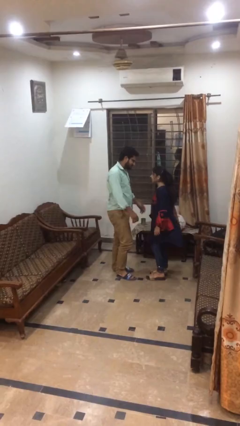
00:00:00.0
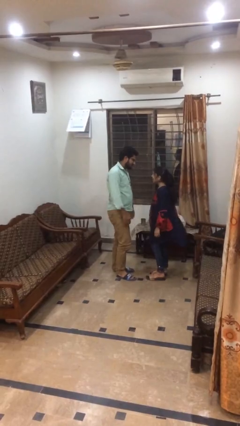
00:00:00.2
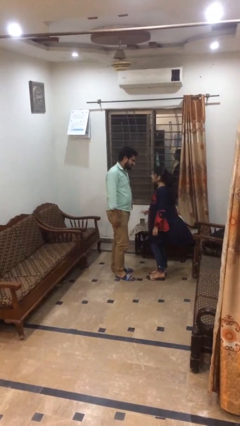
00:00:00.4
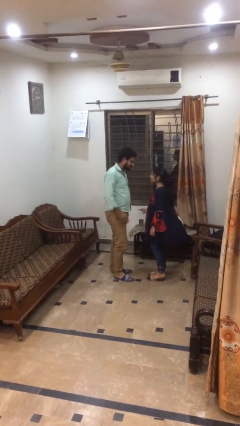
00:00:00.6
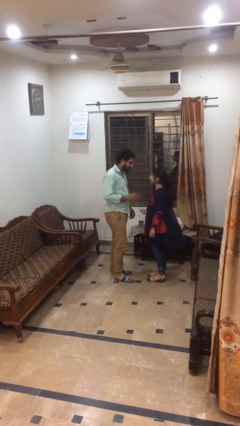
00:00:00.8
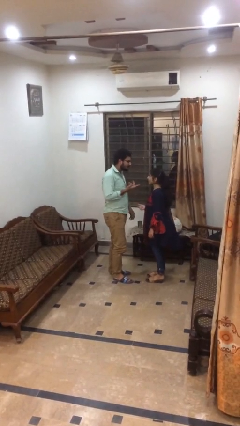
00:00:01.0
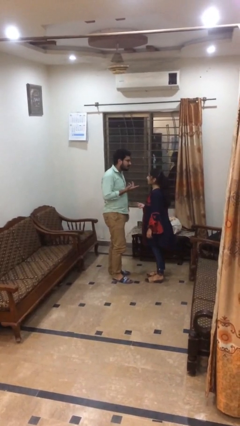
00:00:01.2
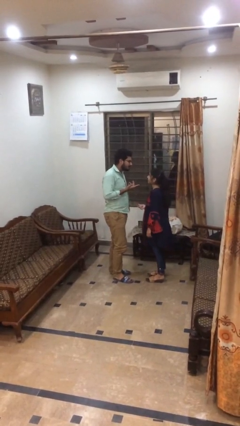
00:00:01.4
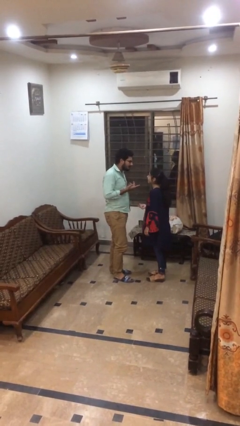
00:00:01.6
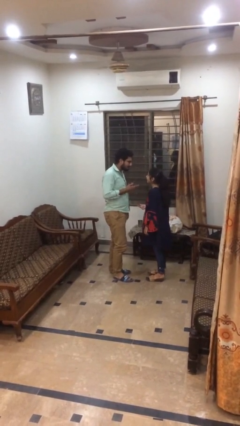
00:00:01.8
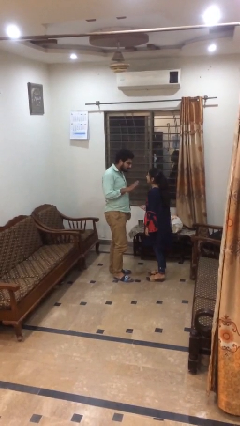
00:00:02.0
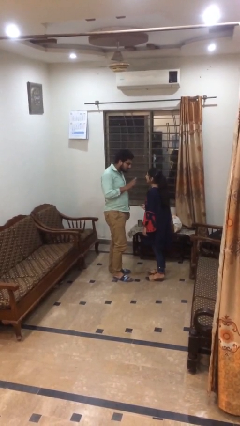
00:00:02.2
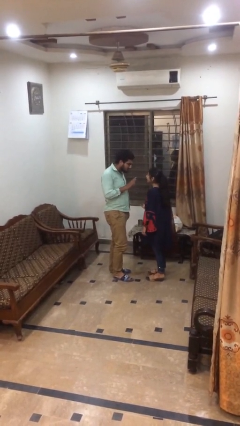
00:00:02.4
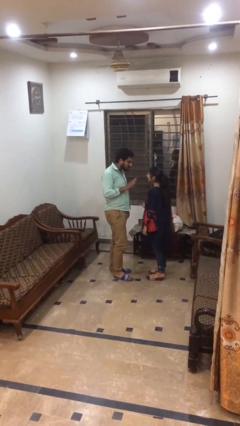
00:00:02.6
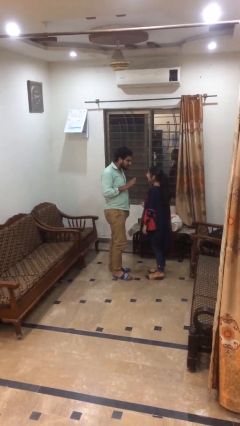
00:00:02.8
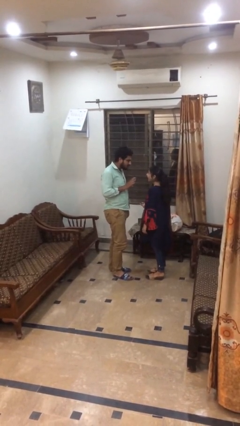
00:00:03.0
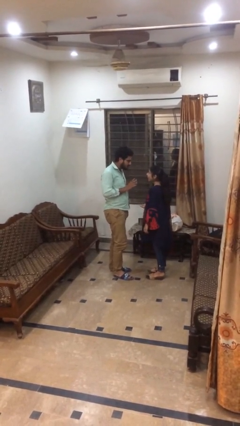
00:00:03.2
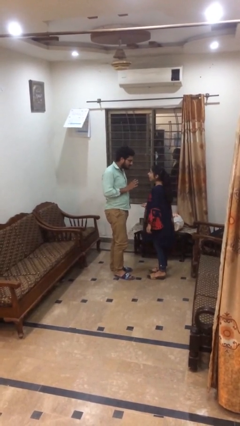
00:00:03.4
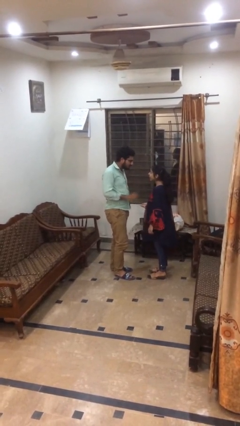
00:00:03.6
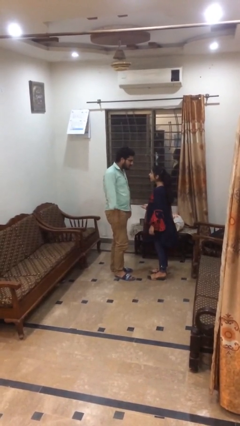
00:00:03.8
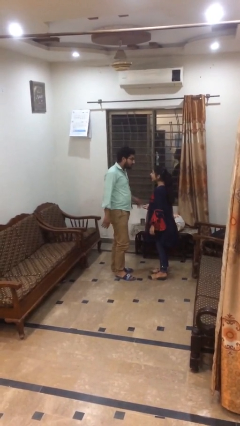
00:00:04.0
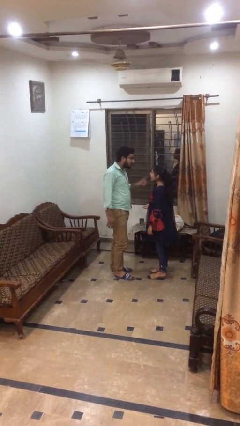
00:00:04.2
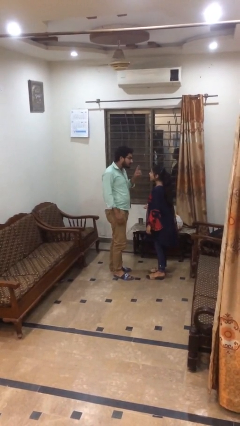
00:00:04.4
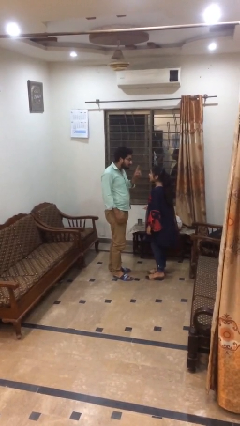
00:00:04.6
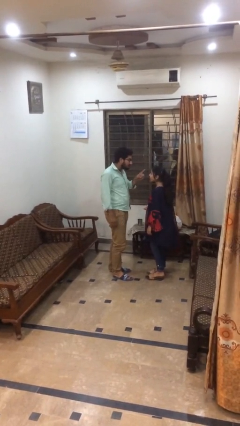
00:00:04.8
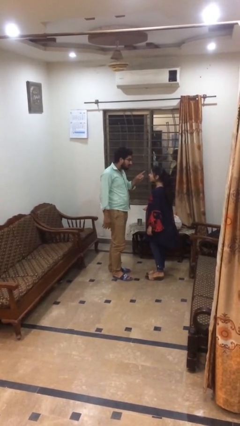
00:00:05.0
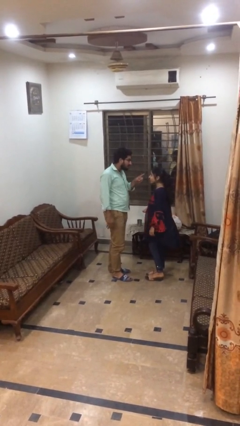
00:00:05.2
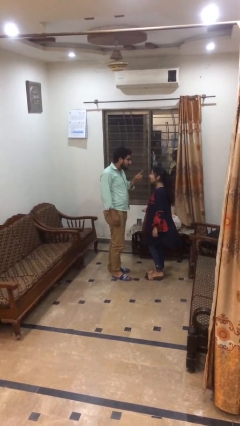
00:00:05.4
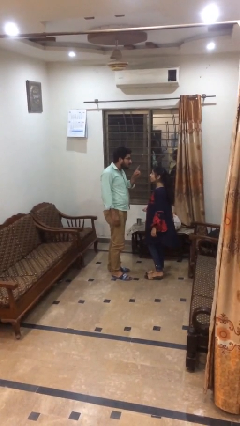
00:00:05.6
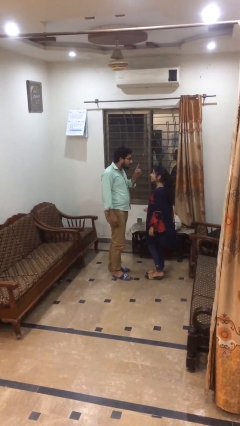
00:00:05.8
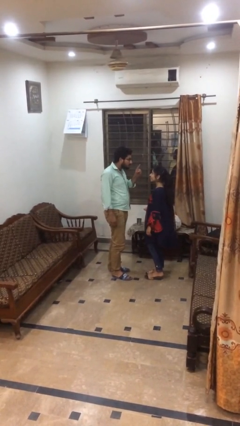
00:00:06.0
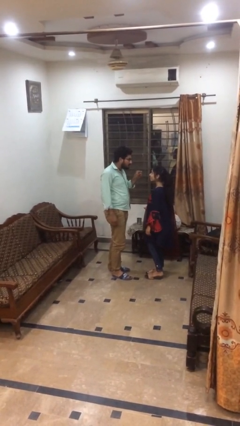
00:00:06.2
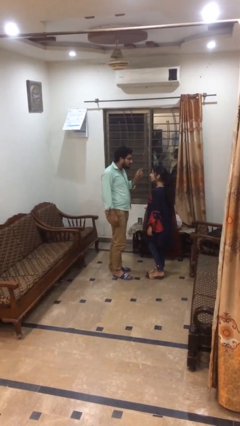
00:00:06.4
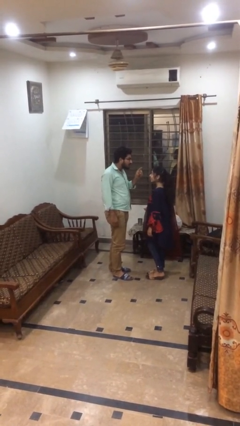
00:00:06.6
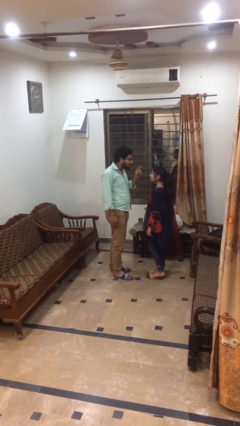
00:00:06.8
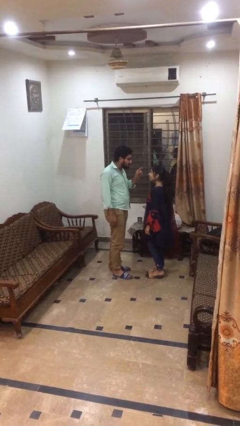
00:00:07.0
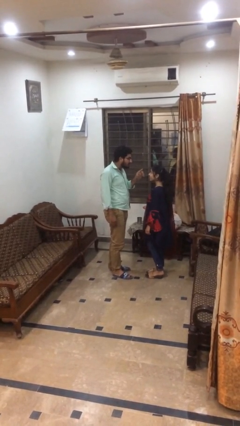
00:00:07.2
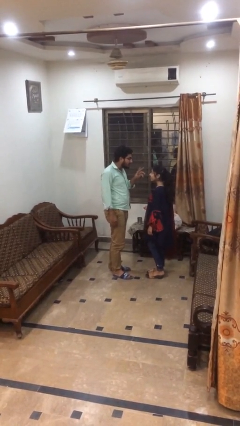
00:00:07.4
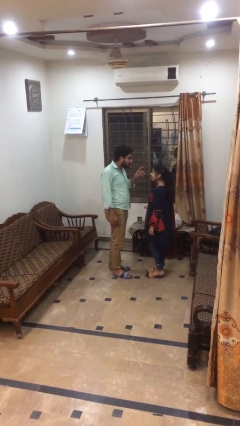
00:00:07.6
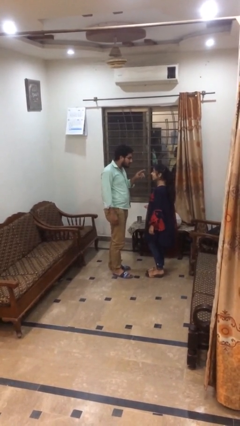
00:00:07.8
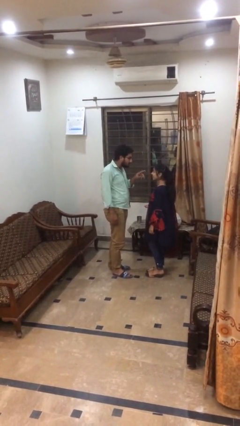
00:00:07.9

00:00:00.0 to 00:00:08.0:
person talks to person

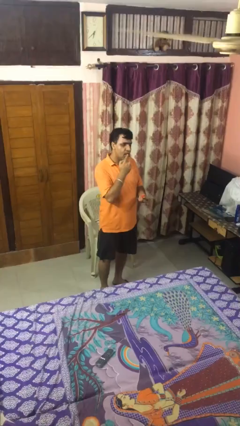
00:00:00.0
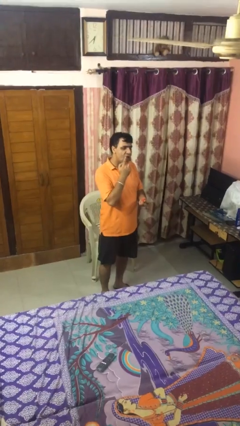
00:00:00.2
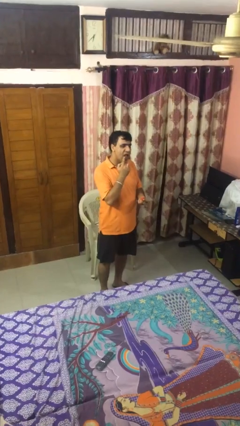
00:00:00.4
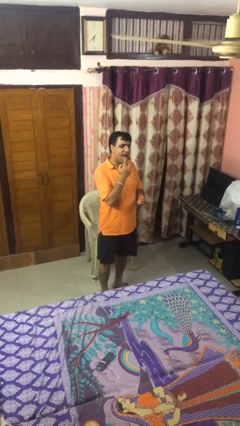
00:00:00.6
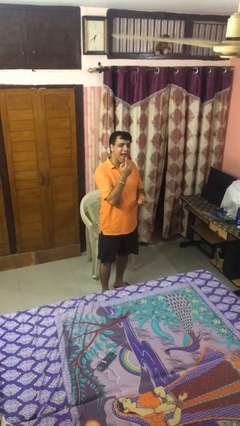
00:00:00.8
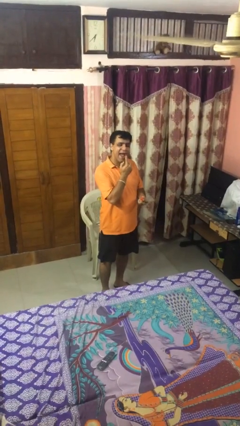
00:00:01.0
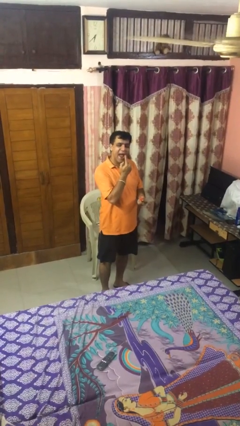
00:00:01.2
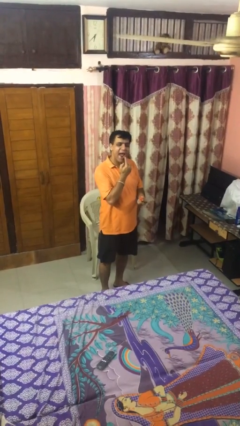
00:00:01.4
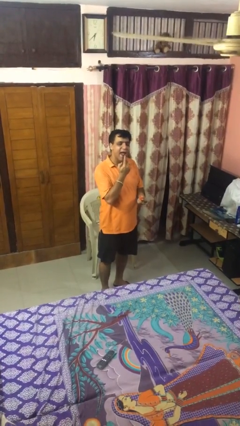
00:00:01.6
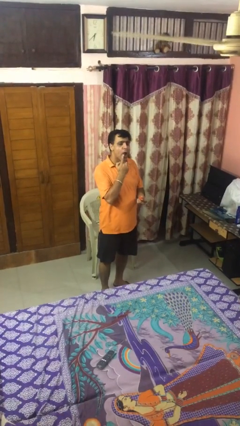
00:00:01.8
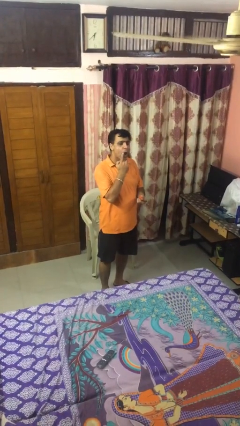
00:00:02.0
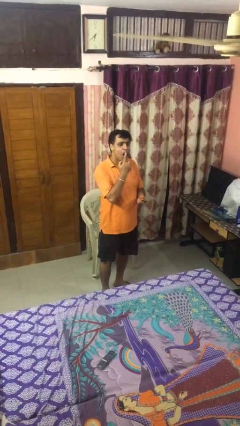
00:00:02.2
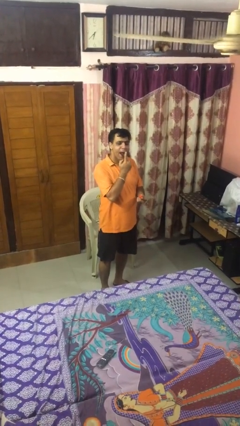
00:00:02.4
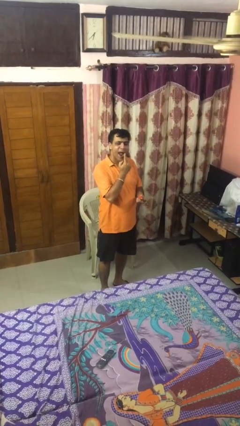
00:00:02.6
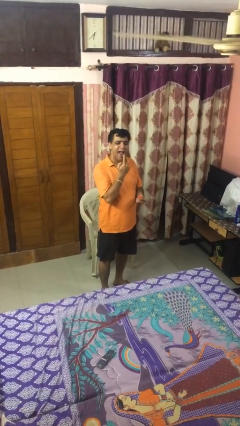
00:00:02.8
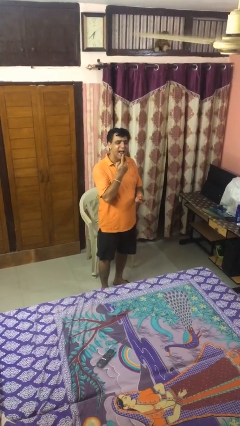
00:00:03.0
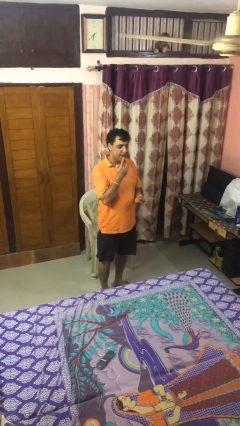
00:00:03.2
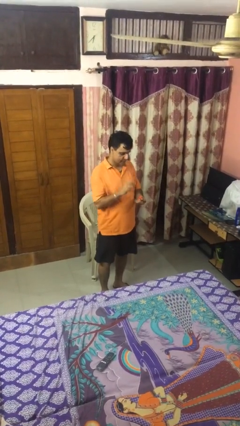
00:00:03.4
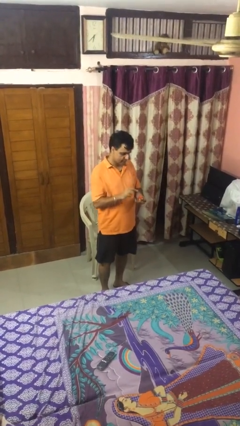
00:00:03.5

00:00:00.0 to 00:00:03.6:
person applies lip makeup

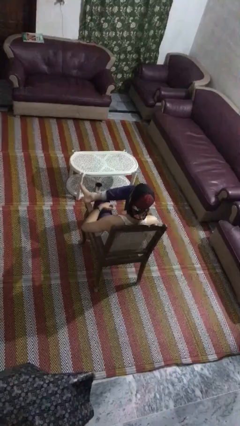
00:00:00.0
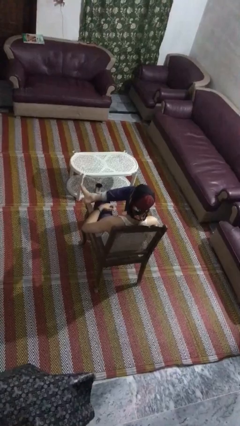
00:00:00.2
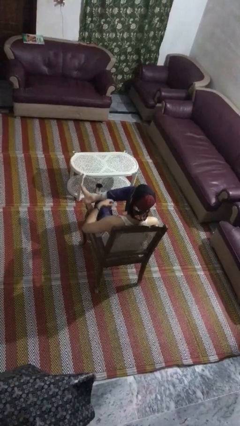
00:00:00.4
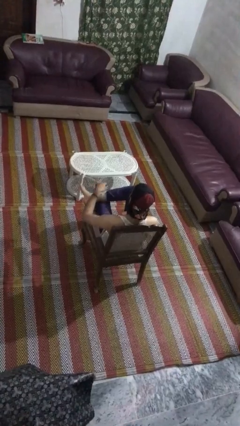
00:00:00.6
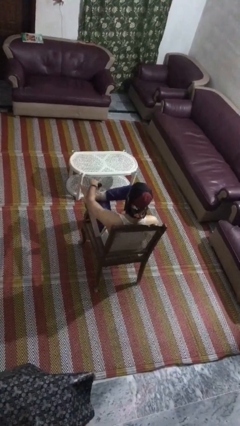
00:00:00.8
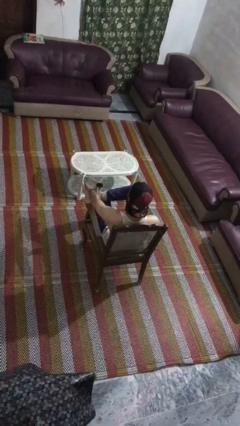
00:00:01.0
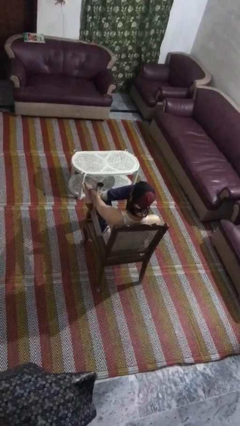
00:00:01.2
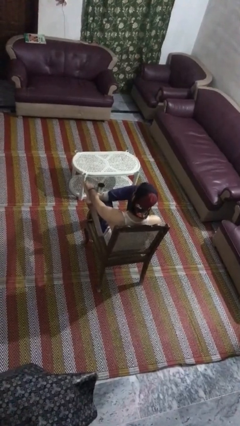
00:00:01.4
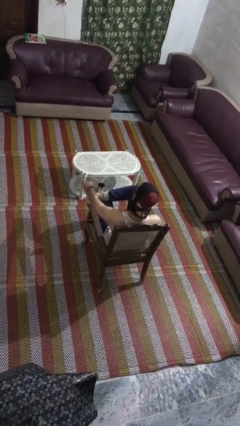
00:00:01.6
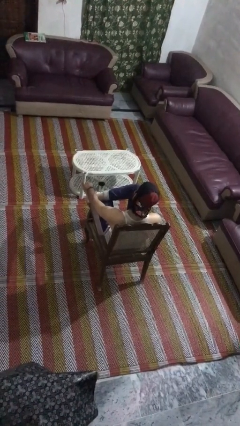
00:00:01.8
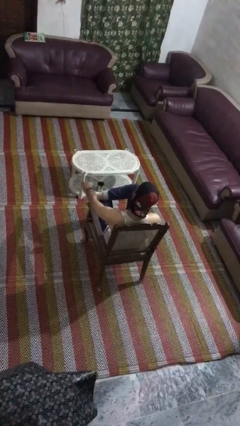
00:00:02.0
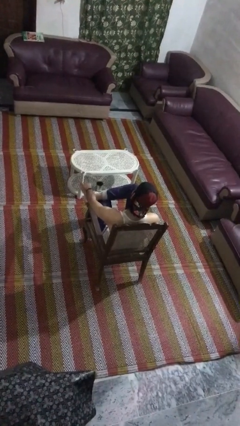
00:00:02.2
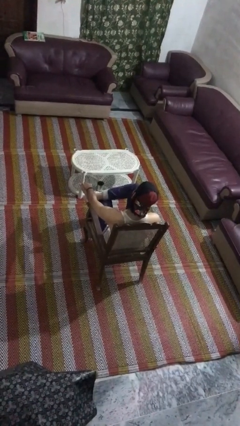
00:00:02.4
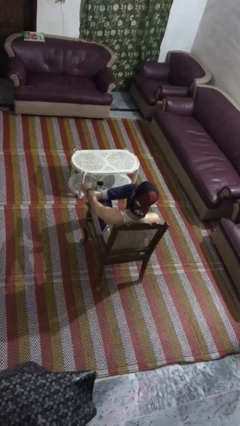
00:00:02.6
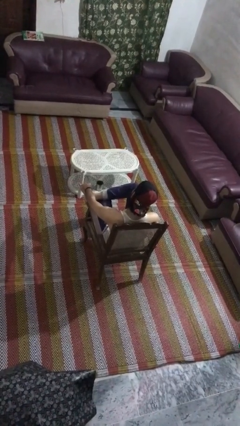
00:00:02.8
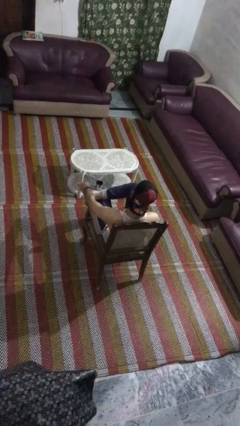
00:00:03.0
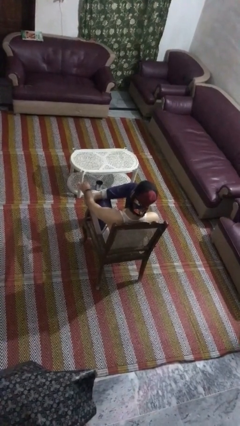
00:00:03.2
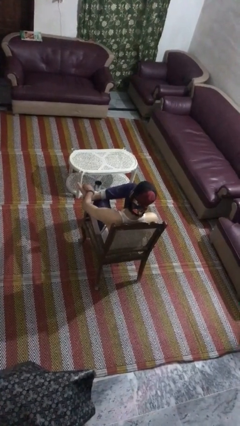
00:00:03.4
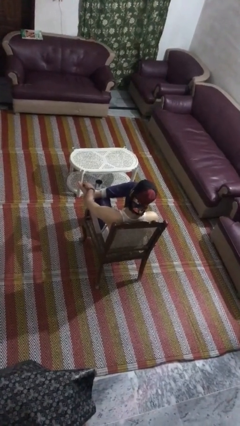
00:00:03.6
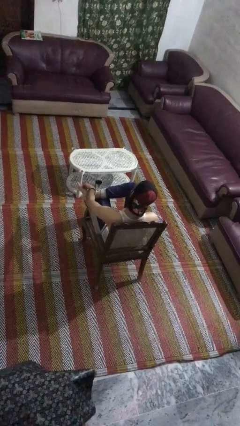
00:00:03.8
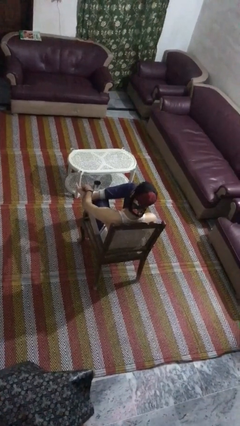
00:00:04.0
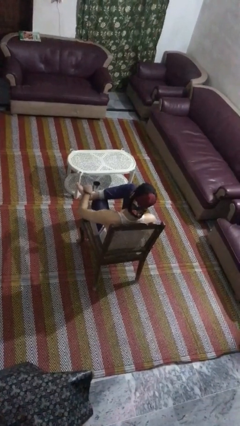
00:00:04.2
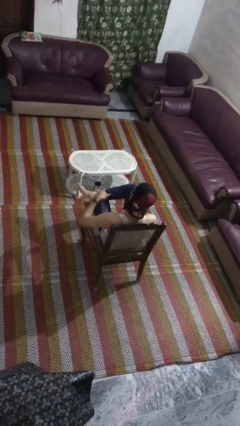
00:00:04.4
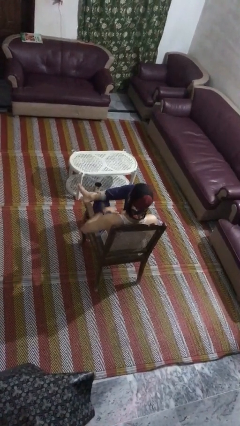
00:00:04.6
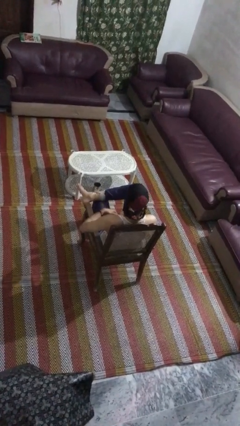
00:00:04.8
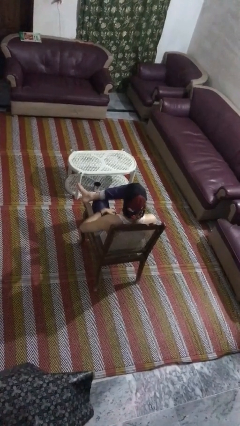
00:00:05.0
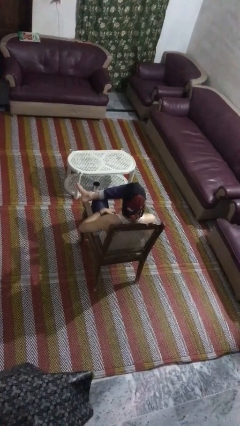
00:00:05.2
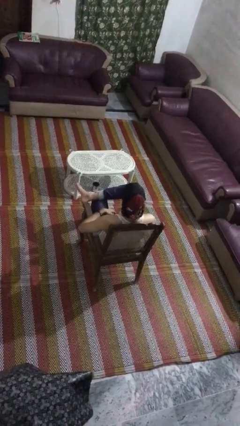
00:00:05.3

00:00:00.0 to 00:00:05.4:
person rubs foot

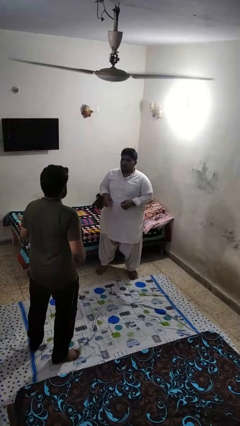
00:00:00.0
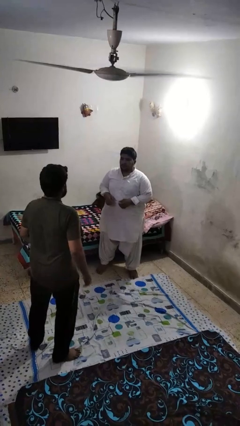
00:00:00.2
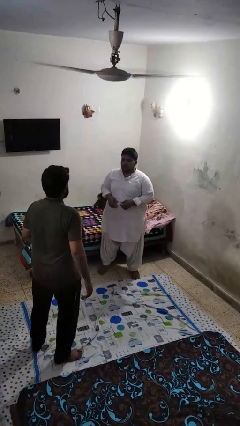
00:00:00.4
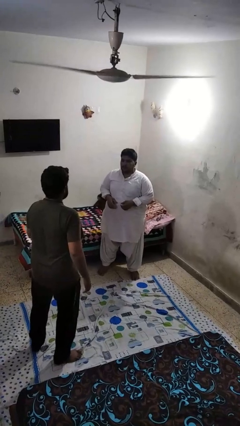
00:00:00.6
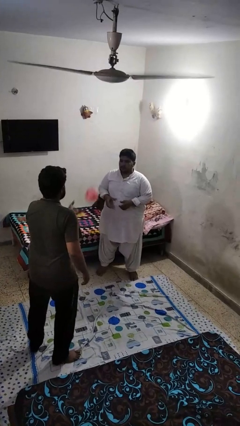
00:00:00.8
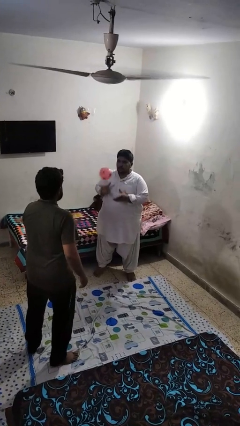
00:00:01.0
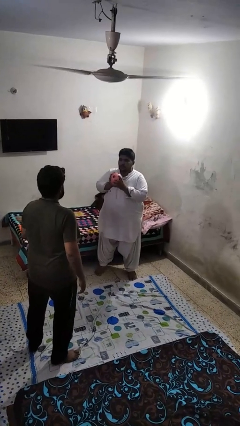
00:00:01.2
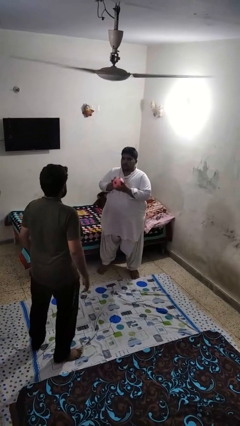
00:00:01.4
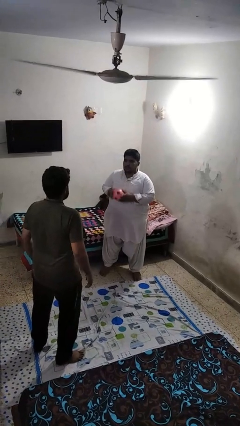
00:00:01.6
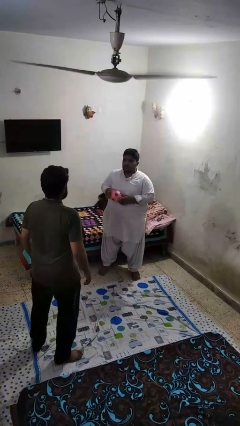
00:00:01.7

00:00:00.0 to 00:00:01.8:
person catches object from person
